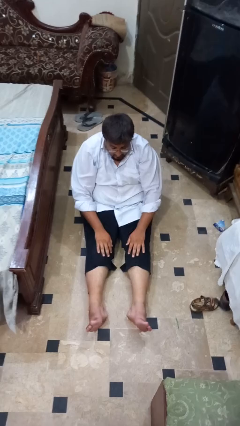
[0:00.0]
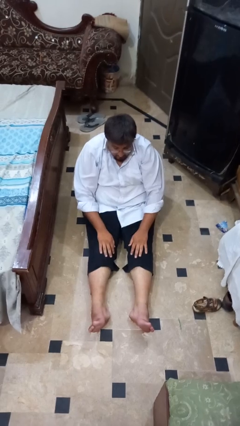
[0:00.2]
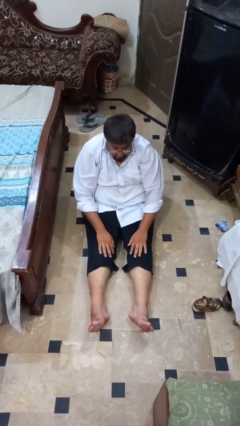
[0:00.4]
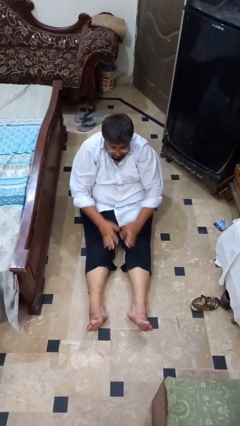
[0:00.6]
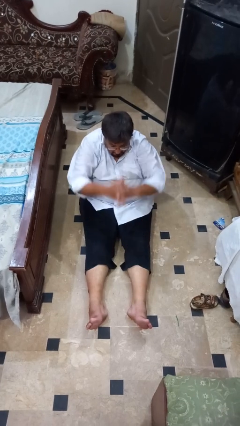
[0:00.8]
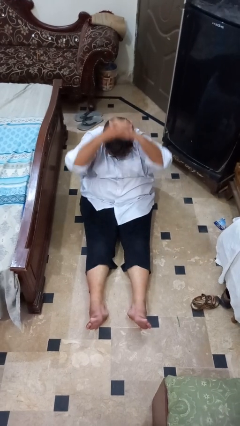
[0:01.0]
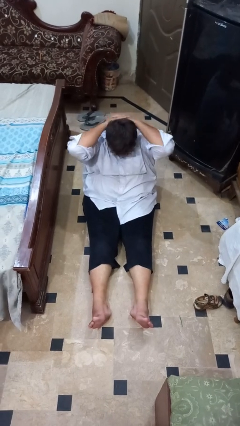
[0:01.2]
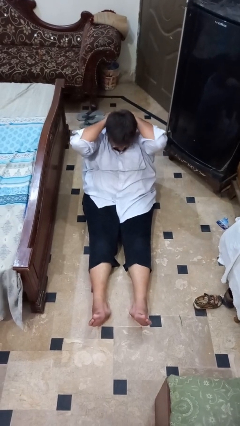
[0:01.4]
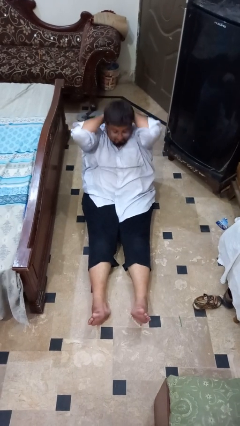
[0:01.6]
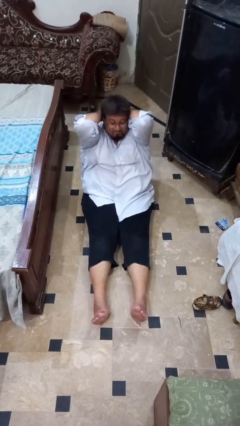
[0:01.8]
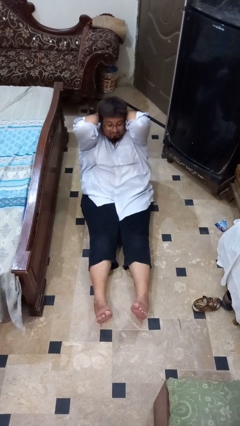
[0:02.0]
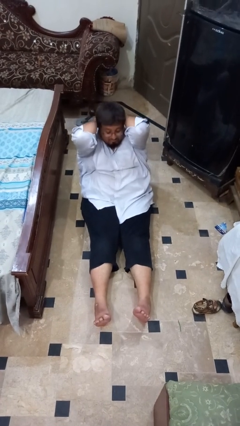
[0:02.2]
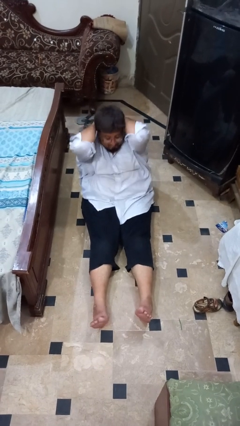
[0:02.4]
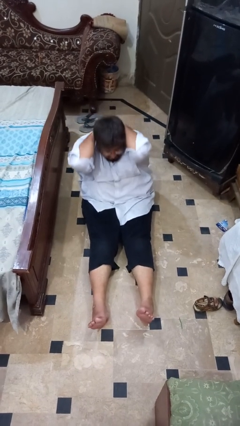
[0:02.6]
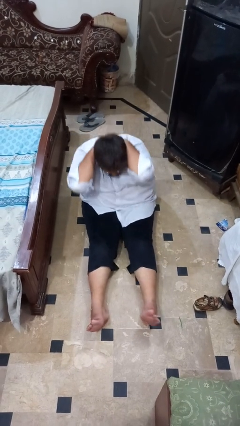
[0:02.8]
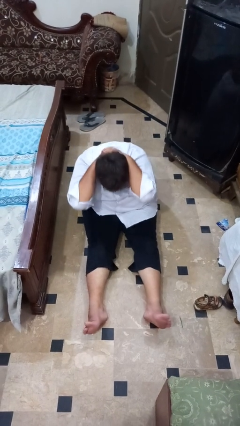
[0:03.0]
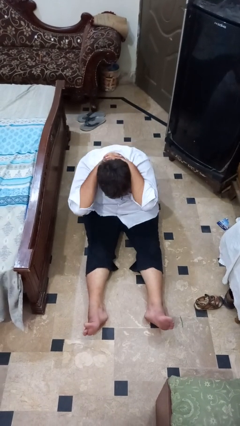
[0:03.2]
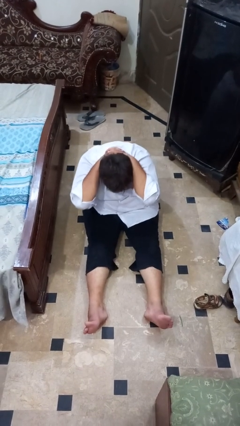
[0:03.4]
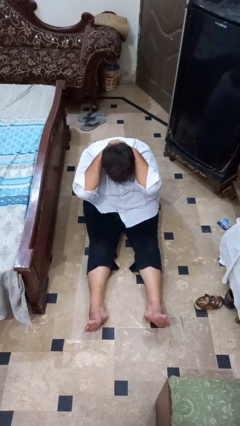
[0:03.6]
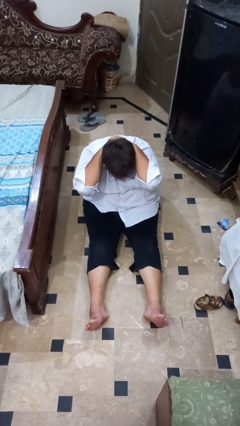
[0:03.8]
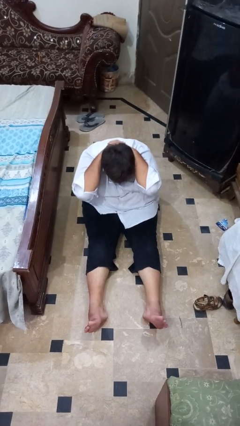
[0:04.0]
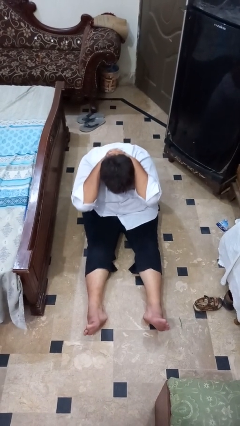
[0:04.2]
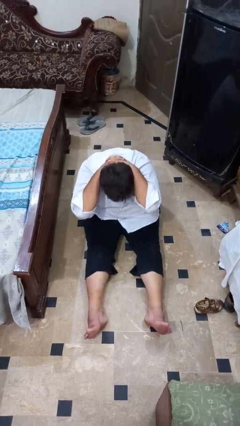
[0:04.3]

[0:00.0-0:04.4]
person exercises with situp

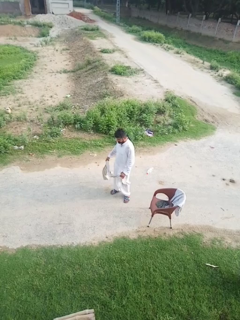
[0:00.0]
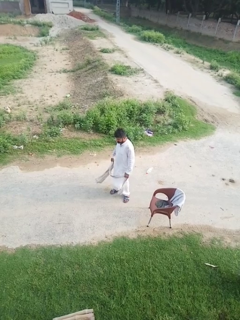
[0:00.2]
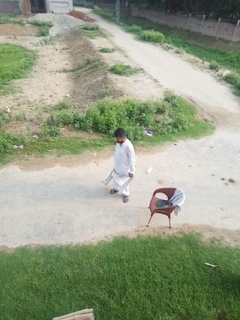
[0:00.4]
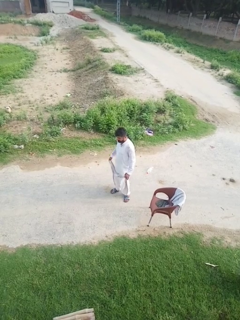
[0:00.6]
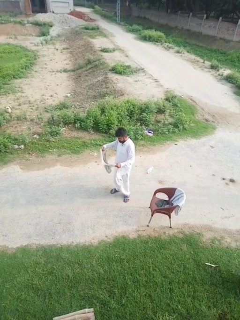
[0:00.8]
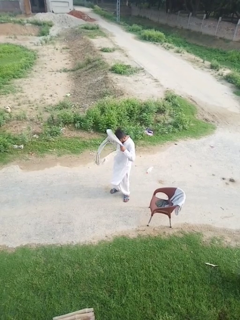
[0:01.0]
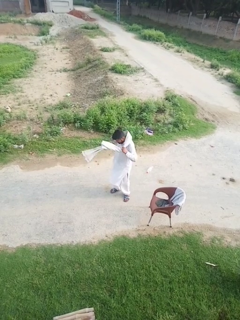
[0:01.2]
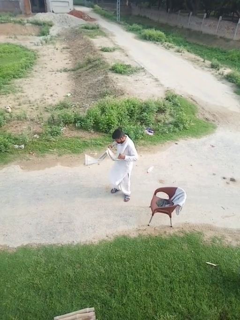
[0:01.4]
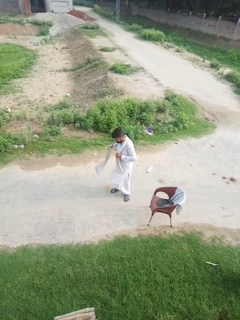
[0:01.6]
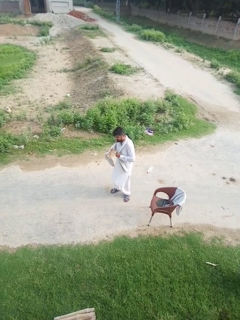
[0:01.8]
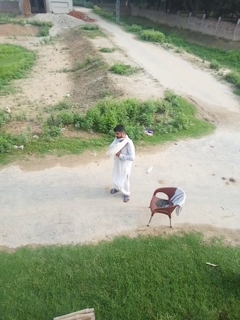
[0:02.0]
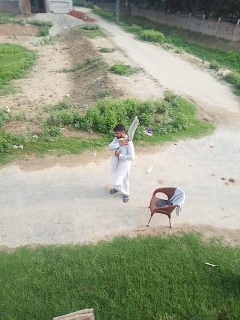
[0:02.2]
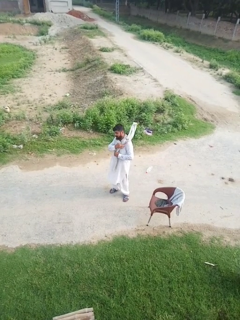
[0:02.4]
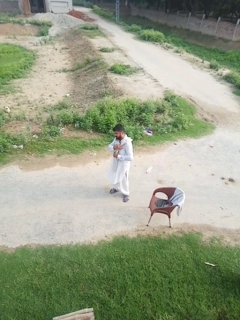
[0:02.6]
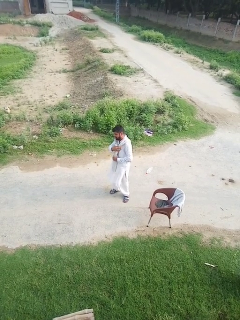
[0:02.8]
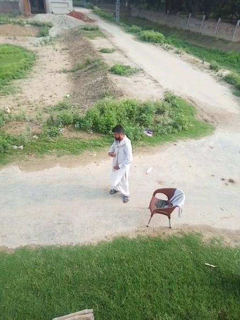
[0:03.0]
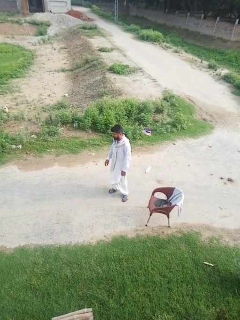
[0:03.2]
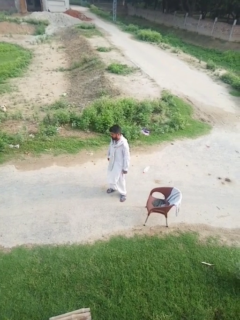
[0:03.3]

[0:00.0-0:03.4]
person puts on scarf

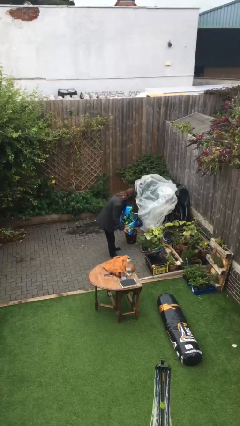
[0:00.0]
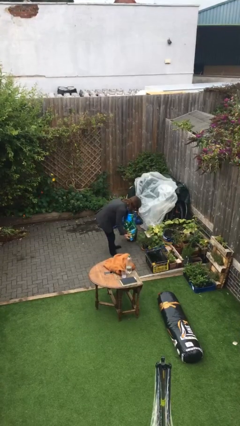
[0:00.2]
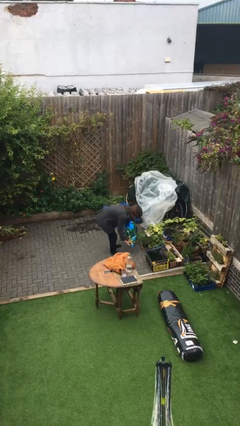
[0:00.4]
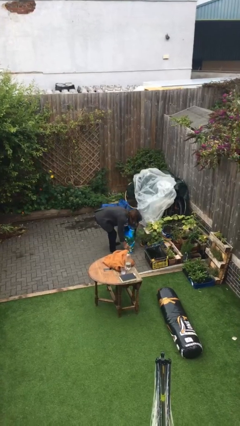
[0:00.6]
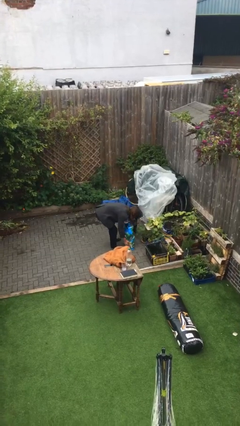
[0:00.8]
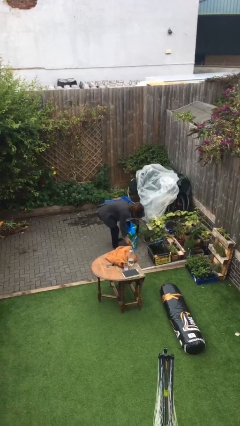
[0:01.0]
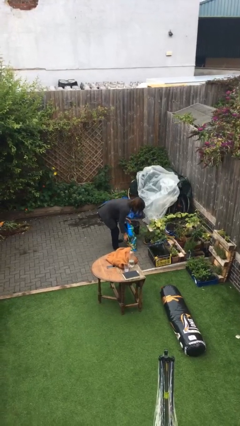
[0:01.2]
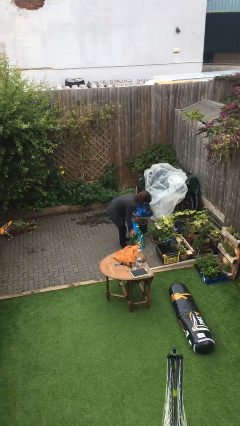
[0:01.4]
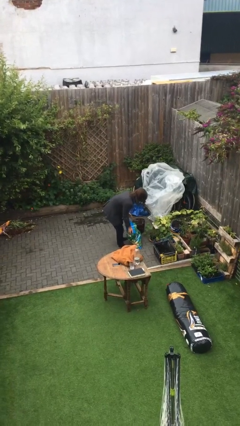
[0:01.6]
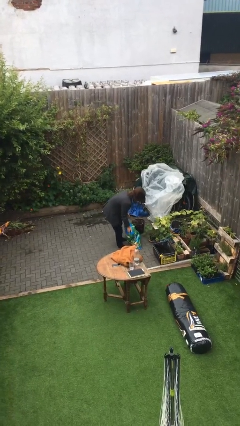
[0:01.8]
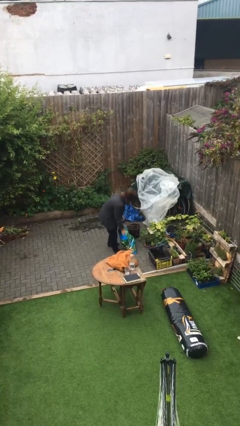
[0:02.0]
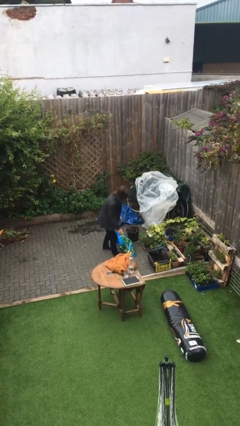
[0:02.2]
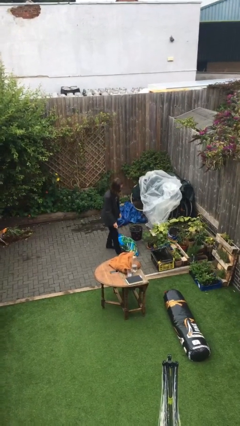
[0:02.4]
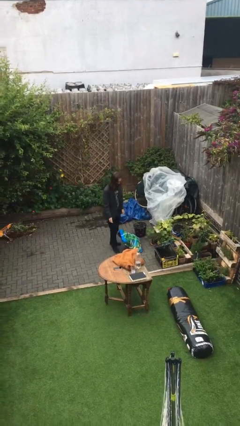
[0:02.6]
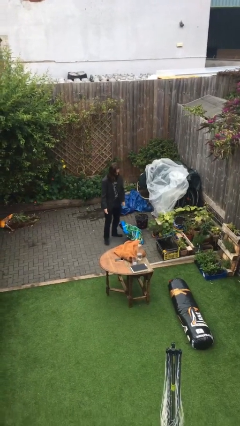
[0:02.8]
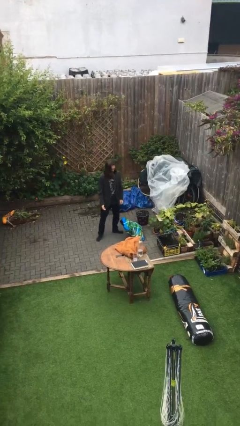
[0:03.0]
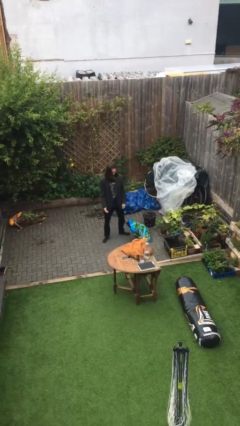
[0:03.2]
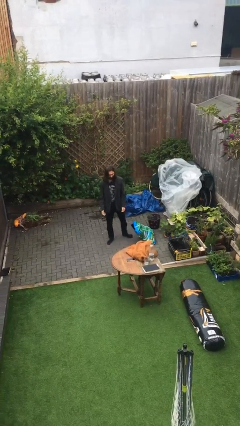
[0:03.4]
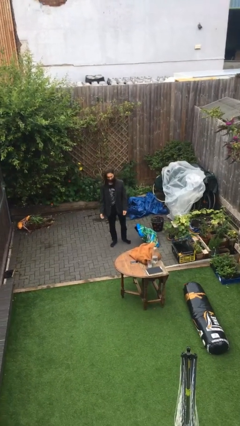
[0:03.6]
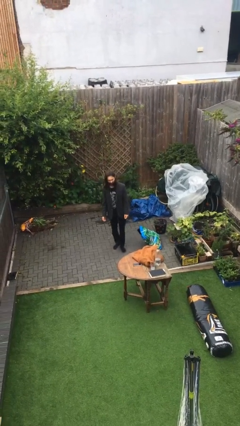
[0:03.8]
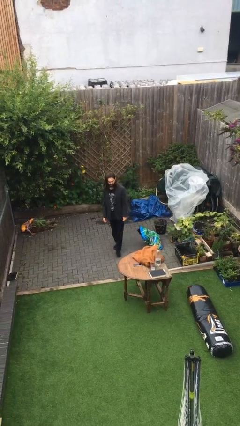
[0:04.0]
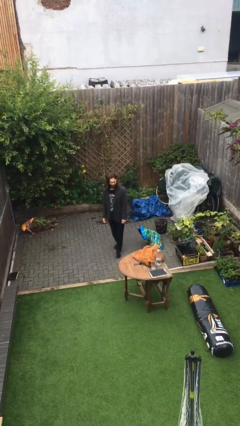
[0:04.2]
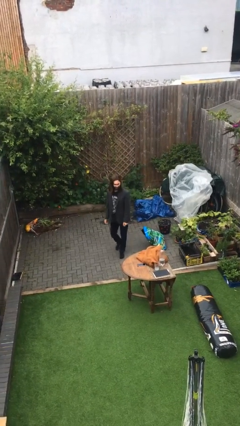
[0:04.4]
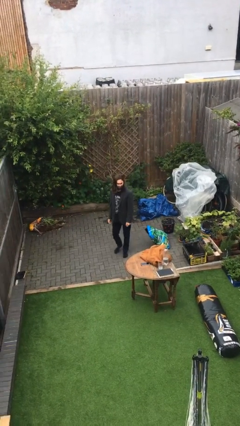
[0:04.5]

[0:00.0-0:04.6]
person puts down object on floor

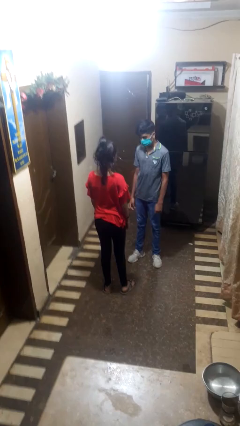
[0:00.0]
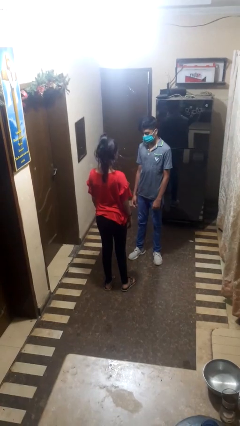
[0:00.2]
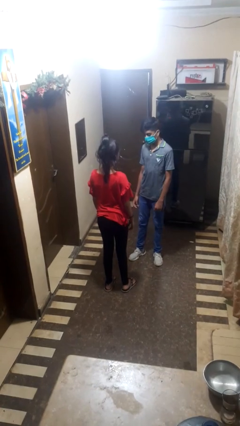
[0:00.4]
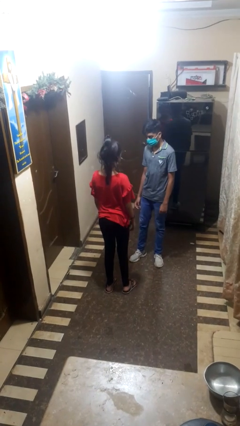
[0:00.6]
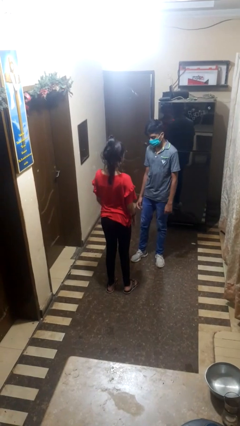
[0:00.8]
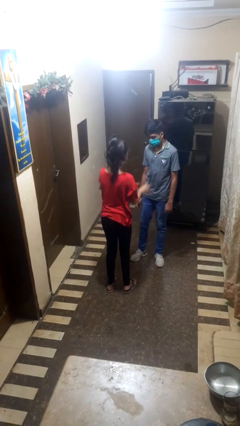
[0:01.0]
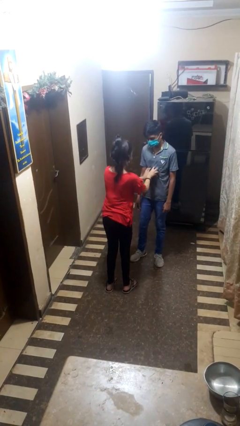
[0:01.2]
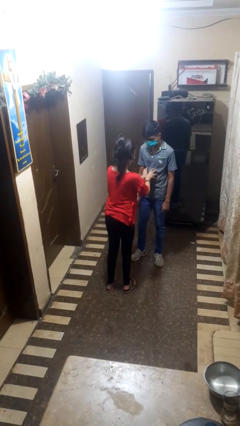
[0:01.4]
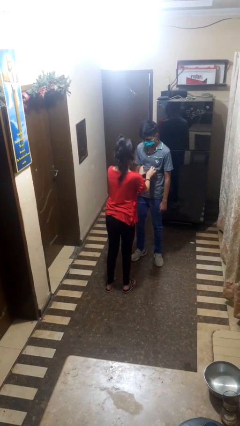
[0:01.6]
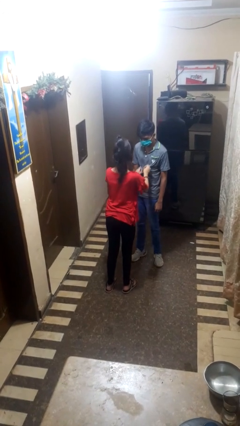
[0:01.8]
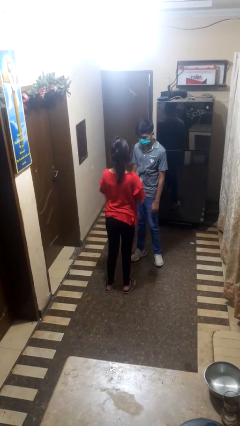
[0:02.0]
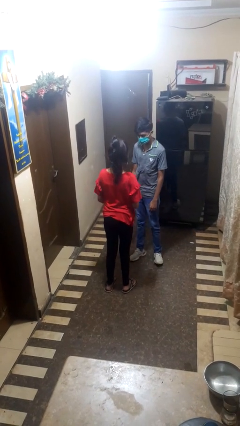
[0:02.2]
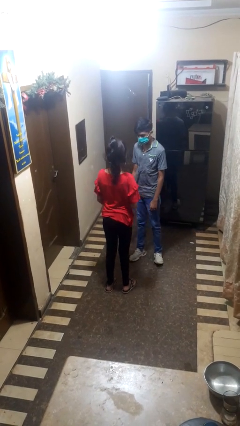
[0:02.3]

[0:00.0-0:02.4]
person tickles person

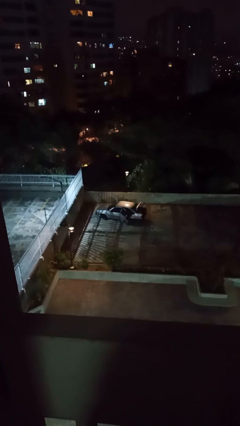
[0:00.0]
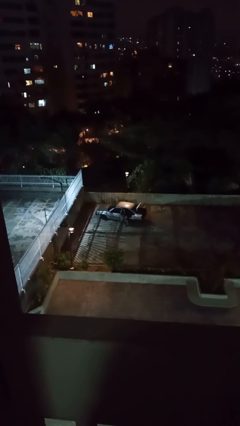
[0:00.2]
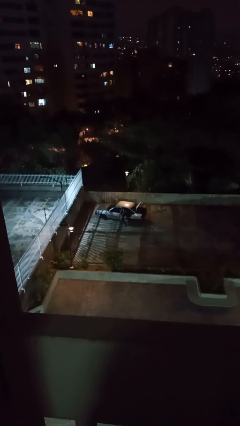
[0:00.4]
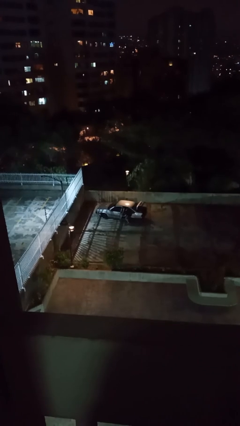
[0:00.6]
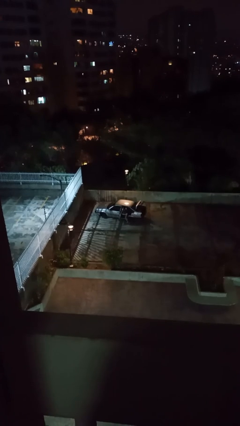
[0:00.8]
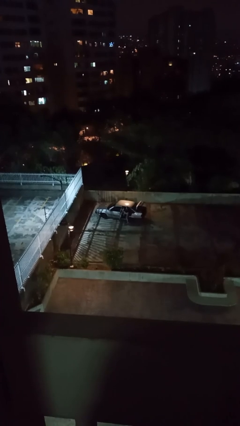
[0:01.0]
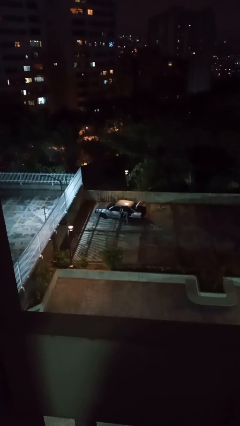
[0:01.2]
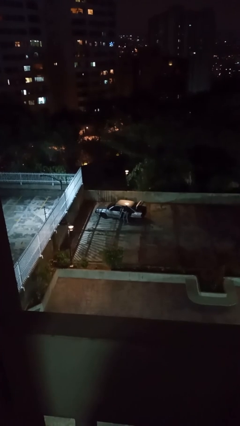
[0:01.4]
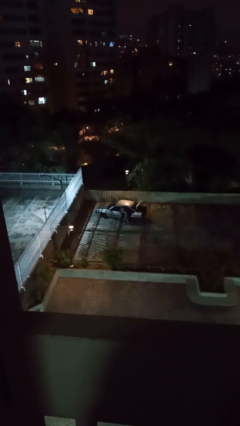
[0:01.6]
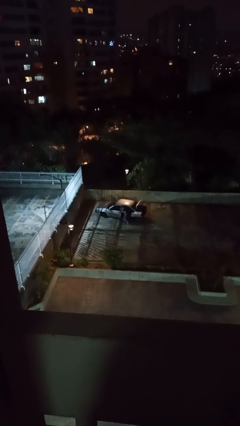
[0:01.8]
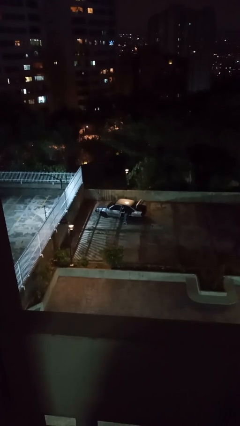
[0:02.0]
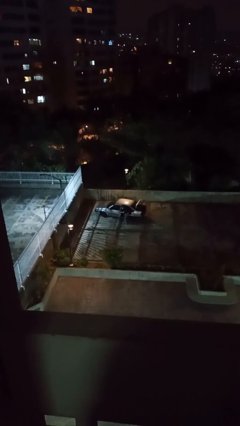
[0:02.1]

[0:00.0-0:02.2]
car drops off person

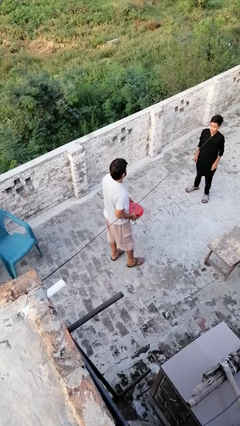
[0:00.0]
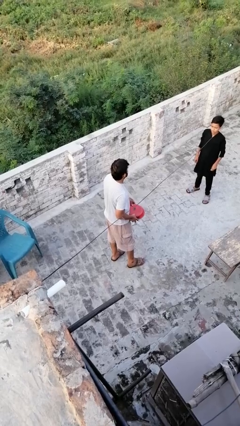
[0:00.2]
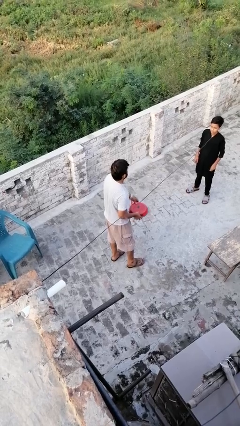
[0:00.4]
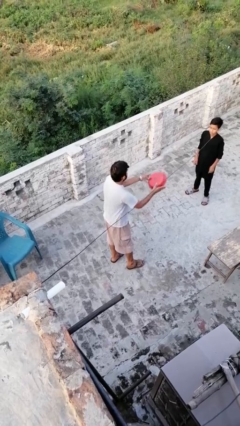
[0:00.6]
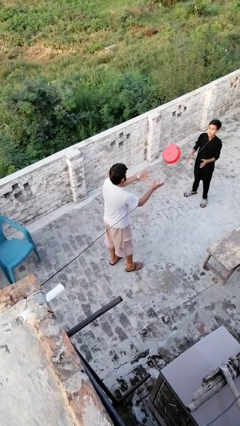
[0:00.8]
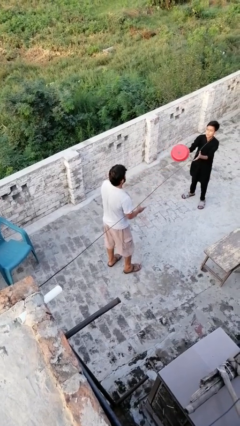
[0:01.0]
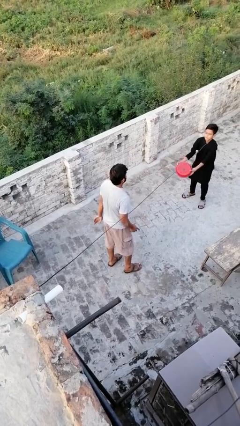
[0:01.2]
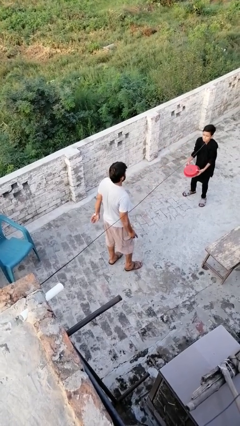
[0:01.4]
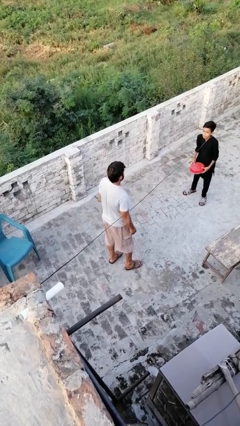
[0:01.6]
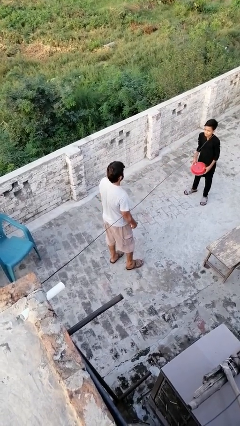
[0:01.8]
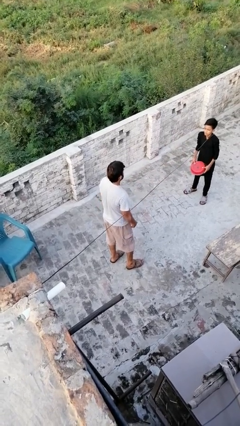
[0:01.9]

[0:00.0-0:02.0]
person throws object to person
